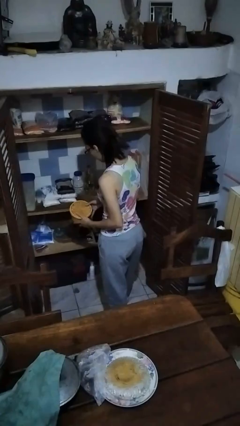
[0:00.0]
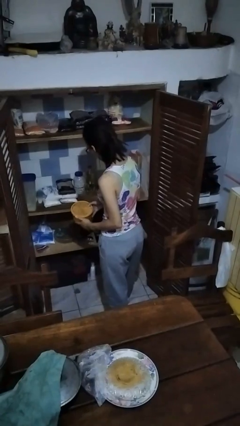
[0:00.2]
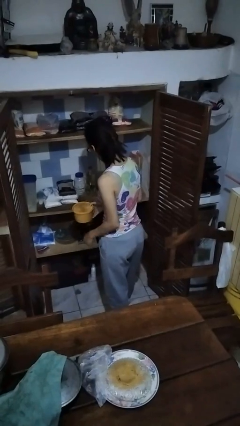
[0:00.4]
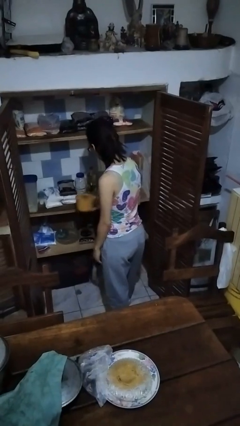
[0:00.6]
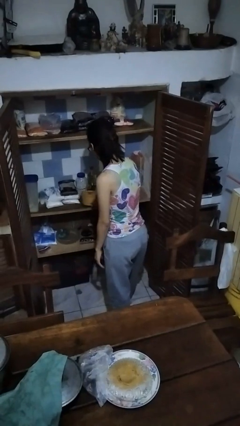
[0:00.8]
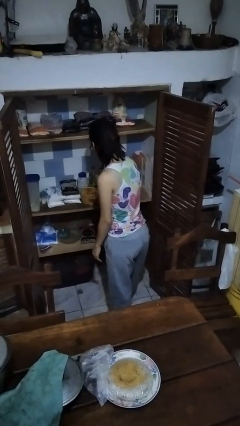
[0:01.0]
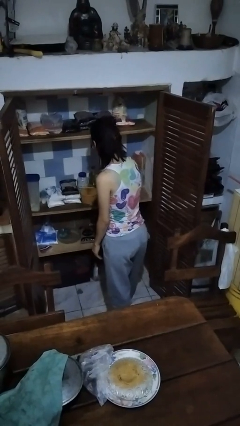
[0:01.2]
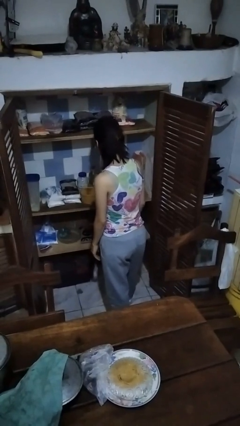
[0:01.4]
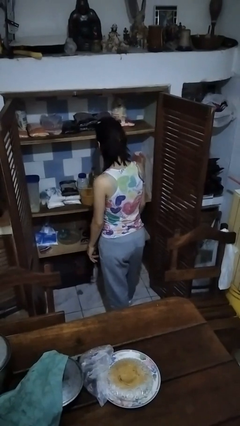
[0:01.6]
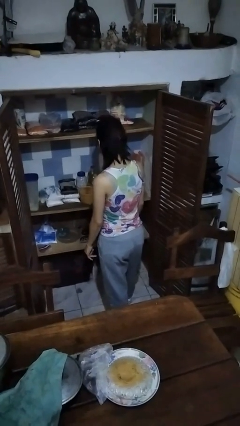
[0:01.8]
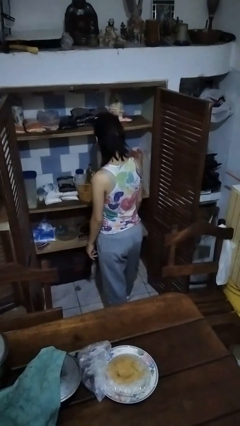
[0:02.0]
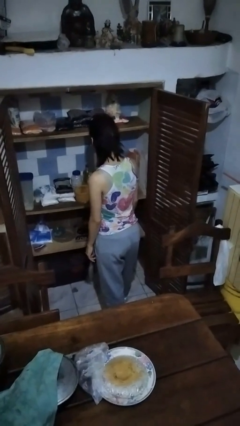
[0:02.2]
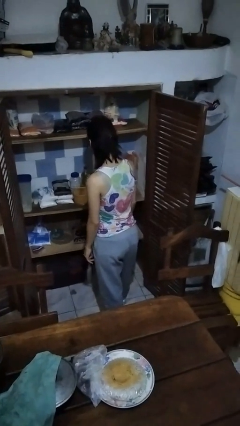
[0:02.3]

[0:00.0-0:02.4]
person puts object in cabinet

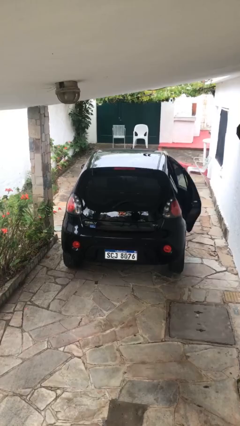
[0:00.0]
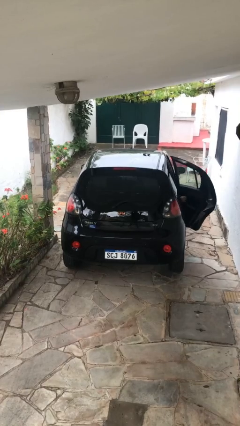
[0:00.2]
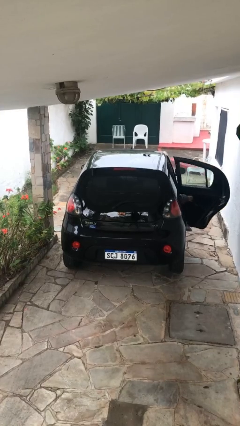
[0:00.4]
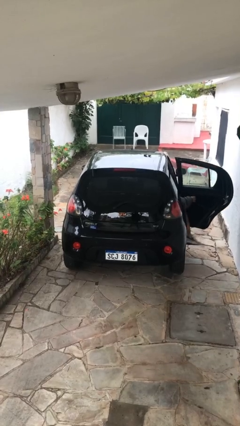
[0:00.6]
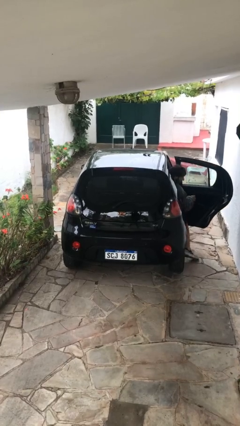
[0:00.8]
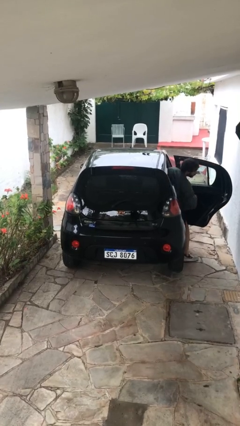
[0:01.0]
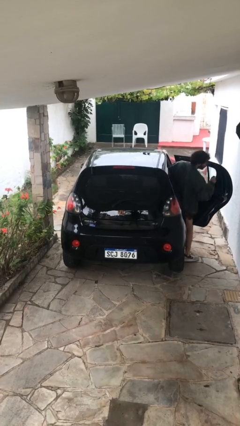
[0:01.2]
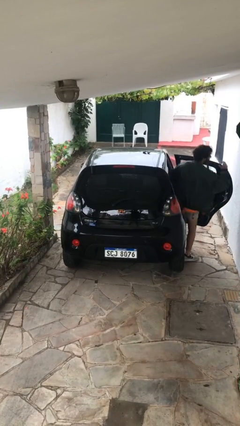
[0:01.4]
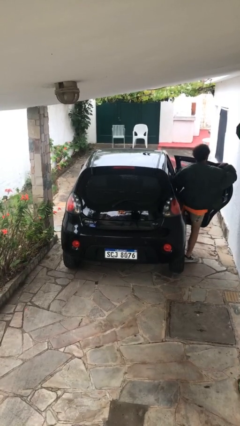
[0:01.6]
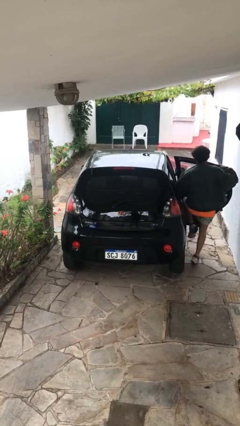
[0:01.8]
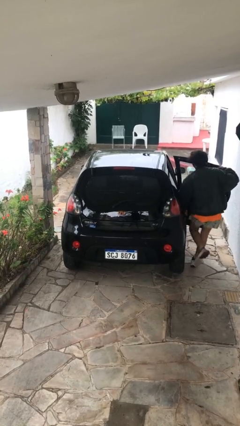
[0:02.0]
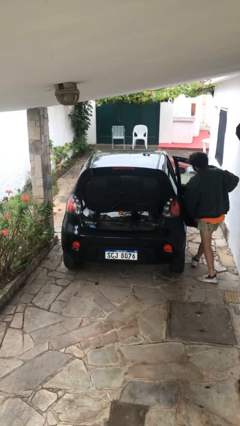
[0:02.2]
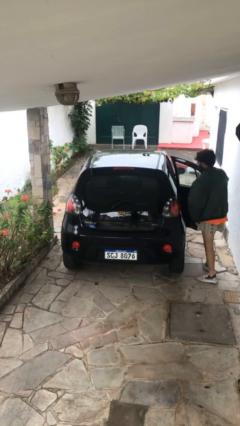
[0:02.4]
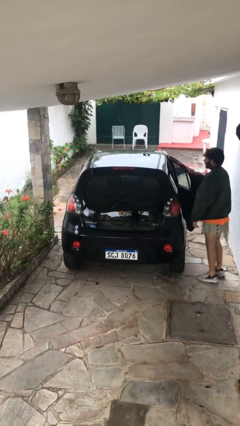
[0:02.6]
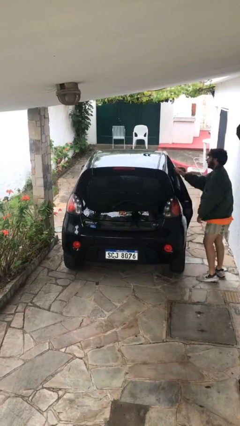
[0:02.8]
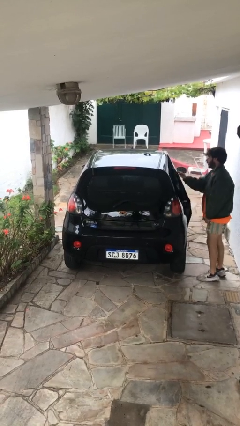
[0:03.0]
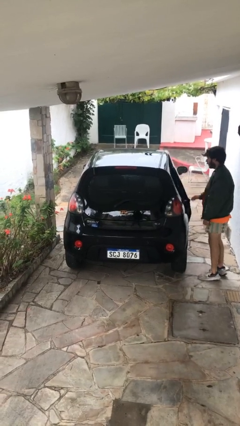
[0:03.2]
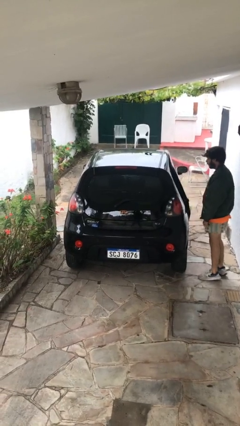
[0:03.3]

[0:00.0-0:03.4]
car drops off person

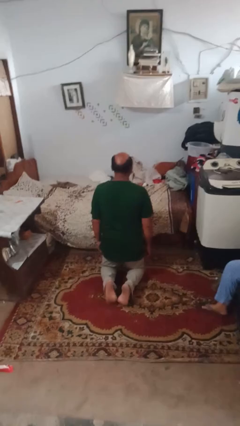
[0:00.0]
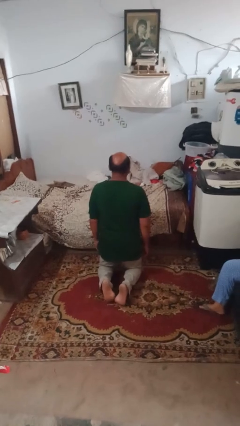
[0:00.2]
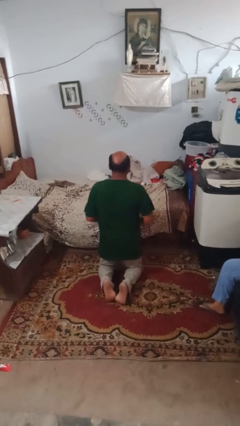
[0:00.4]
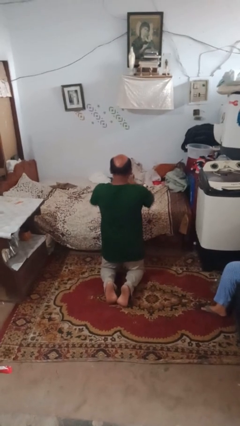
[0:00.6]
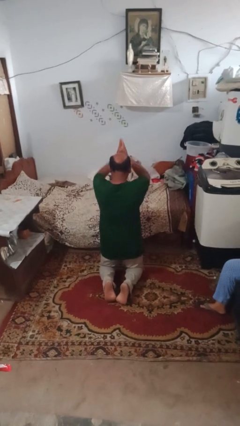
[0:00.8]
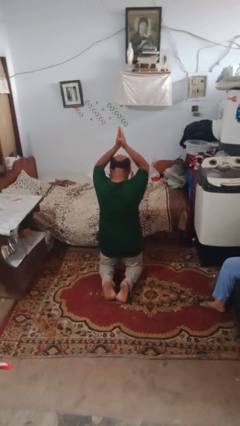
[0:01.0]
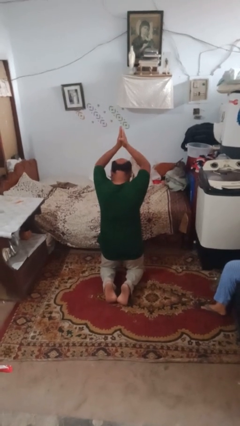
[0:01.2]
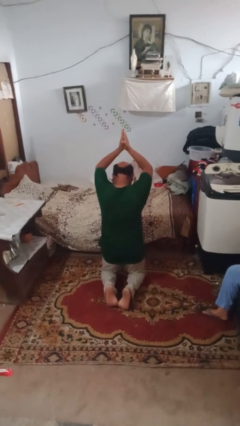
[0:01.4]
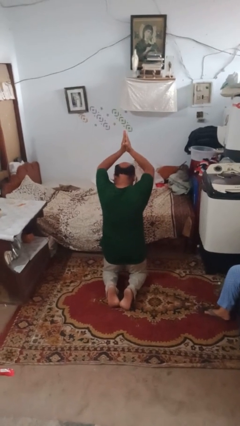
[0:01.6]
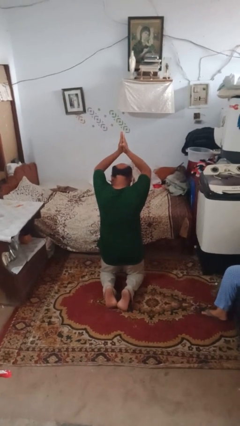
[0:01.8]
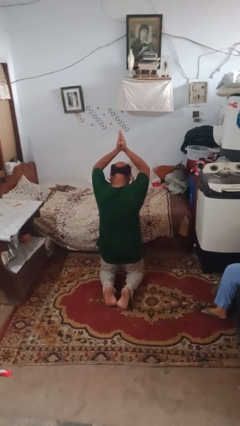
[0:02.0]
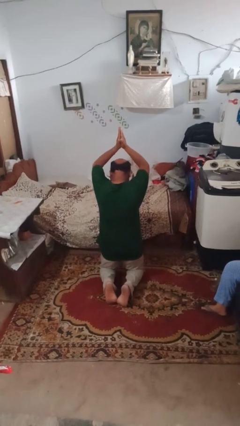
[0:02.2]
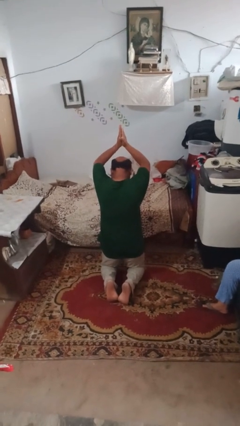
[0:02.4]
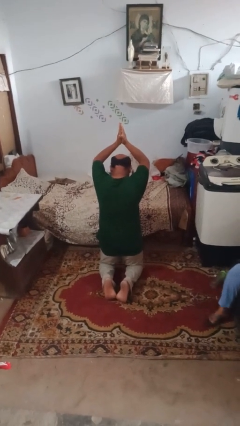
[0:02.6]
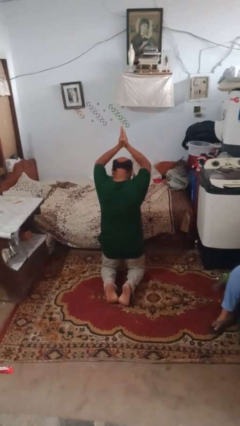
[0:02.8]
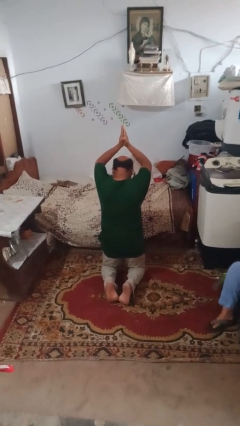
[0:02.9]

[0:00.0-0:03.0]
person prays

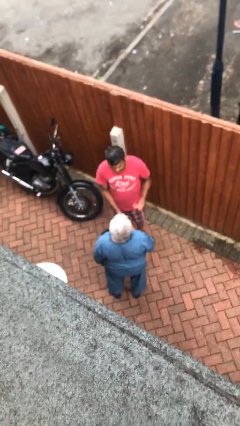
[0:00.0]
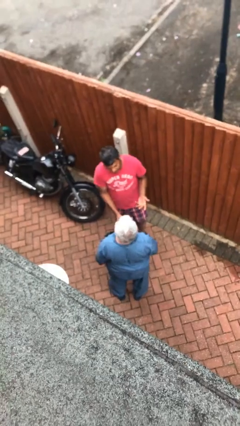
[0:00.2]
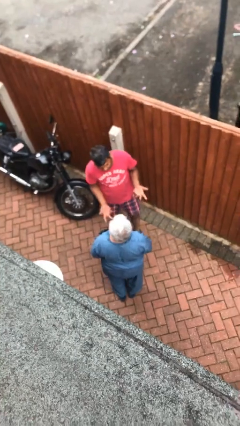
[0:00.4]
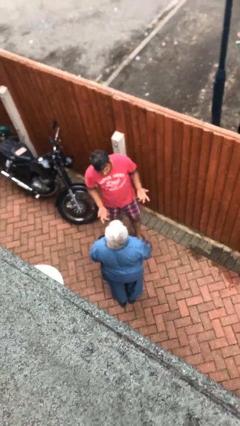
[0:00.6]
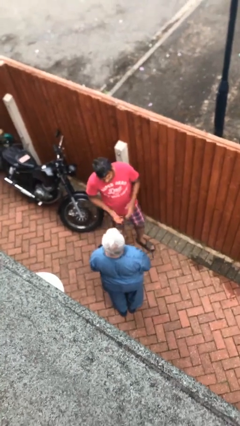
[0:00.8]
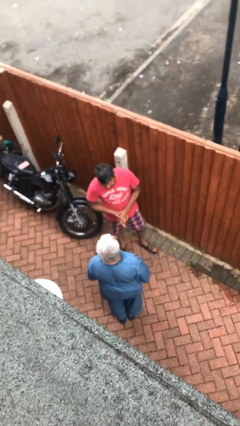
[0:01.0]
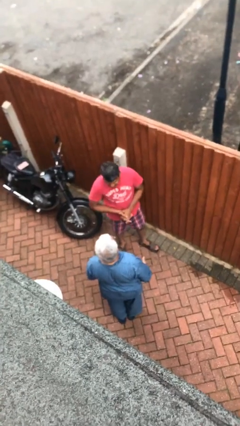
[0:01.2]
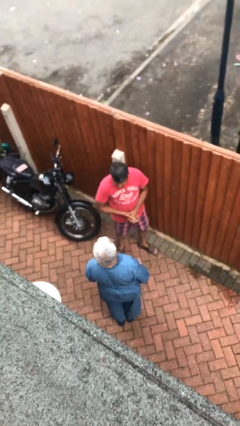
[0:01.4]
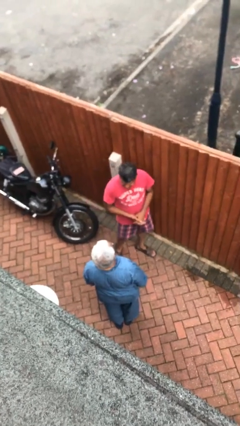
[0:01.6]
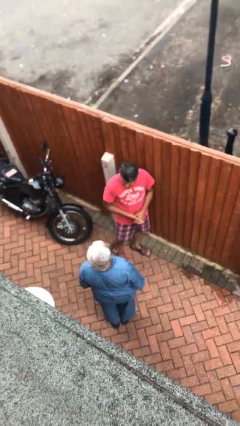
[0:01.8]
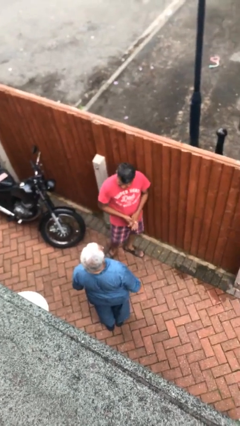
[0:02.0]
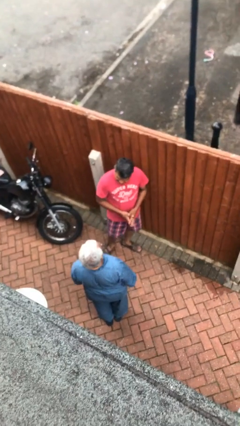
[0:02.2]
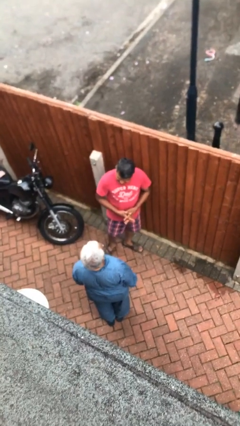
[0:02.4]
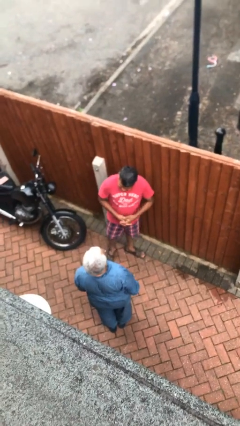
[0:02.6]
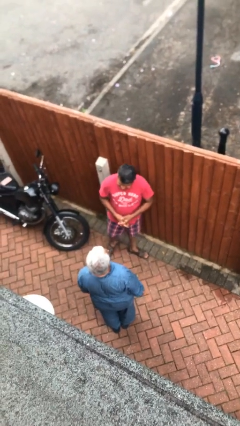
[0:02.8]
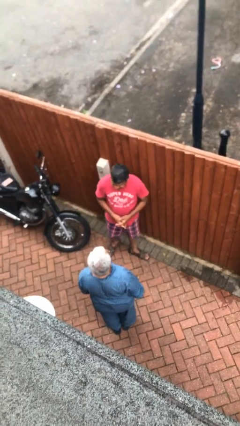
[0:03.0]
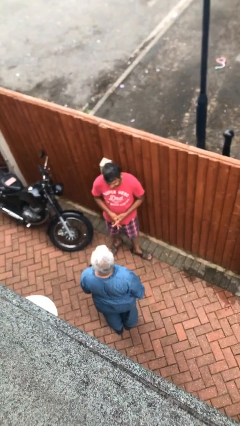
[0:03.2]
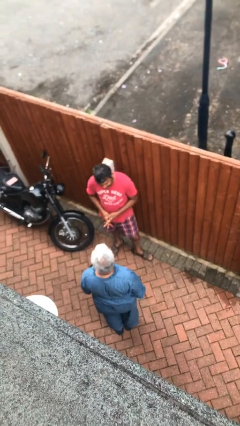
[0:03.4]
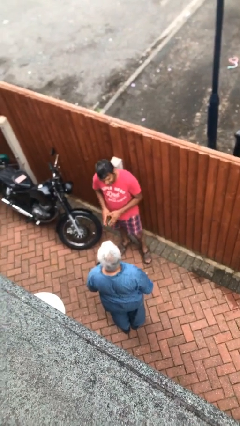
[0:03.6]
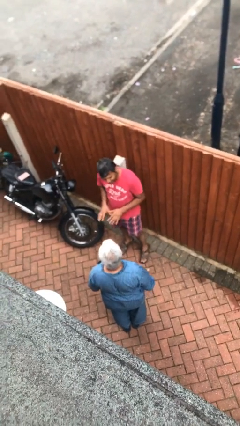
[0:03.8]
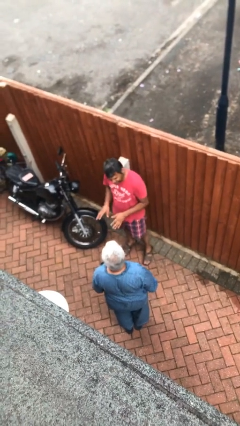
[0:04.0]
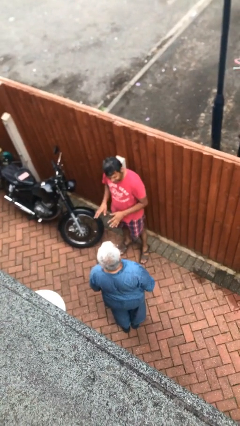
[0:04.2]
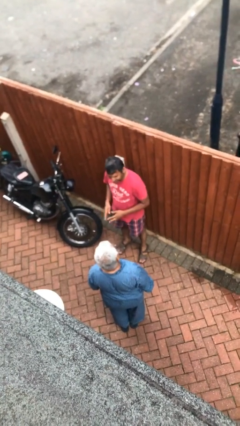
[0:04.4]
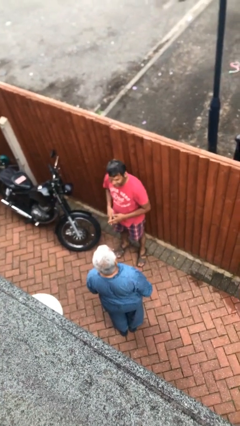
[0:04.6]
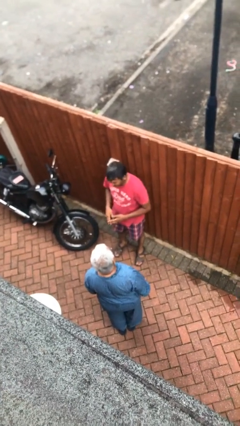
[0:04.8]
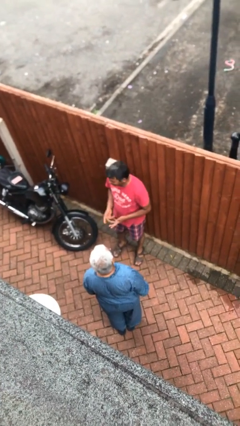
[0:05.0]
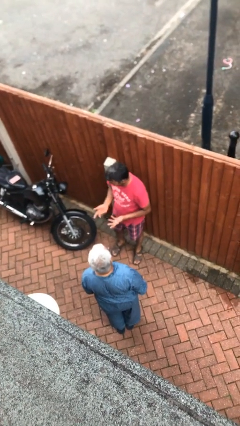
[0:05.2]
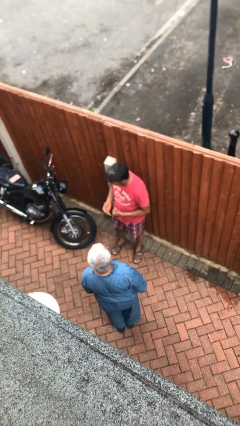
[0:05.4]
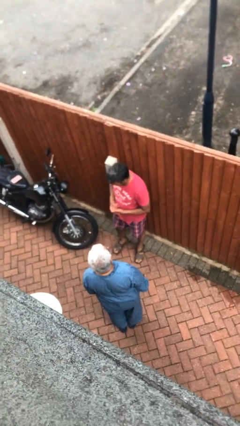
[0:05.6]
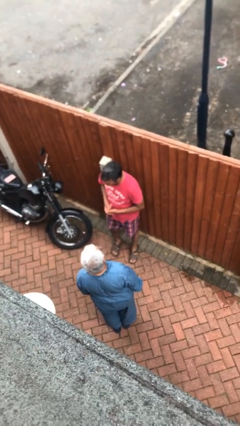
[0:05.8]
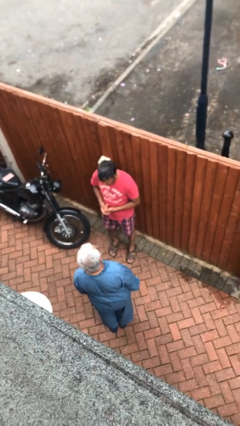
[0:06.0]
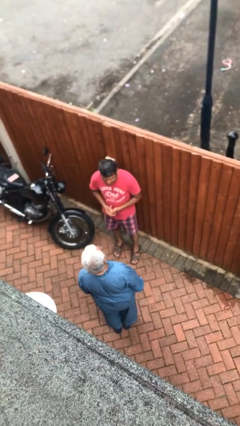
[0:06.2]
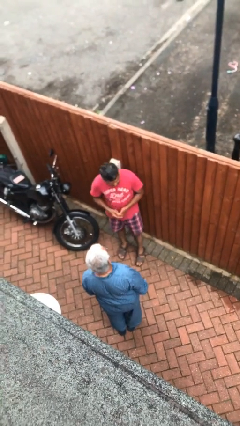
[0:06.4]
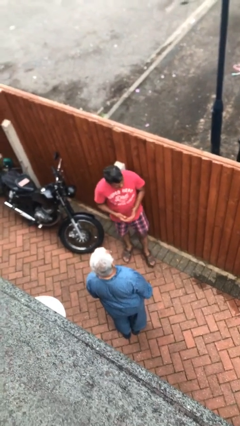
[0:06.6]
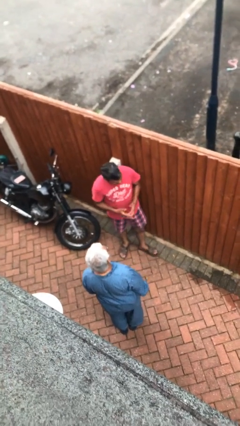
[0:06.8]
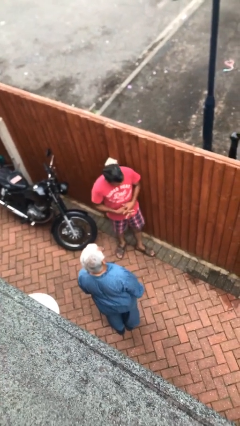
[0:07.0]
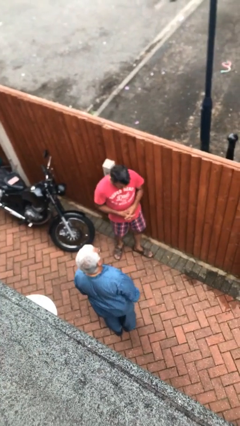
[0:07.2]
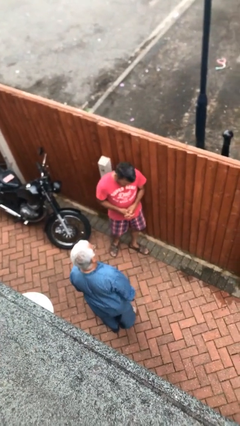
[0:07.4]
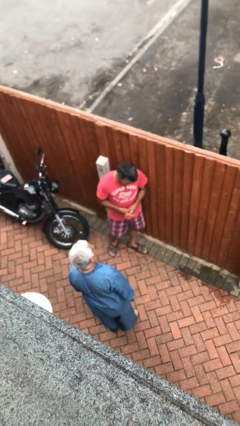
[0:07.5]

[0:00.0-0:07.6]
person talks to person

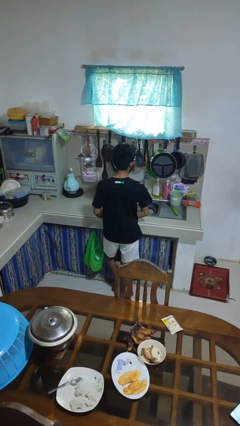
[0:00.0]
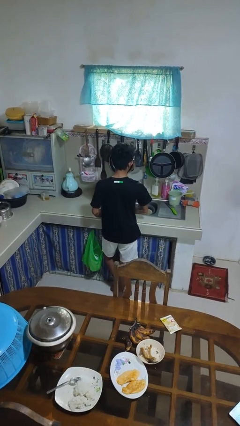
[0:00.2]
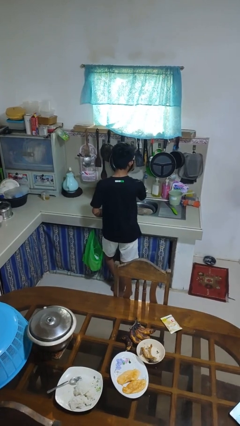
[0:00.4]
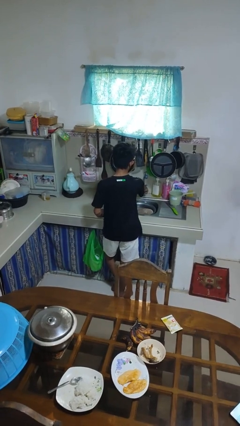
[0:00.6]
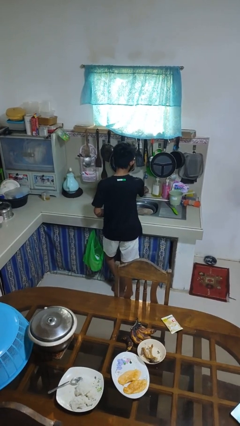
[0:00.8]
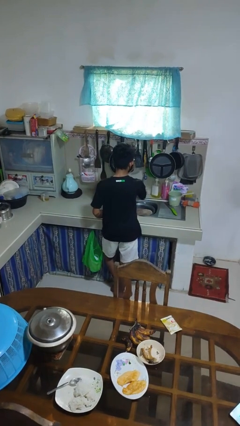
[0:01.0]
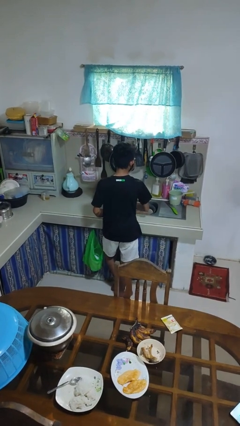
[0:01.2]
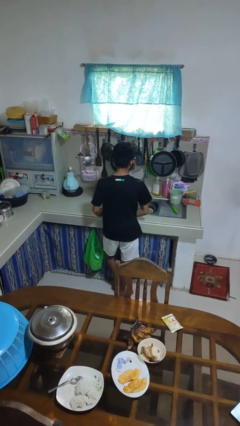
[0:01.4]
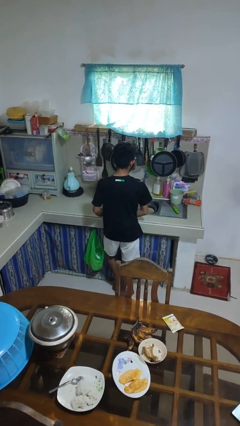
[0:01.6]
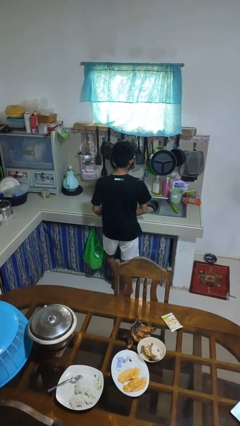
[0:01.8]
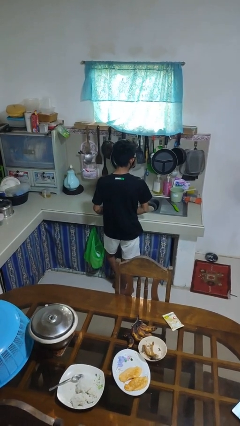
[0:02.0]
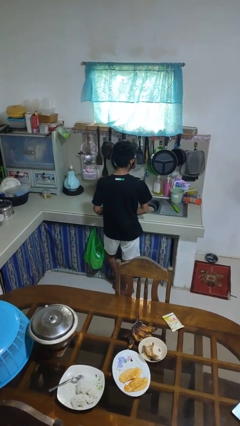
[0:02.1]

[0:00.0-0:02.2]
person opens clothes washer
